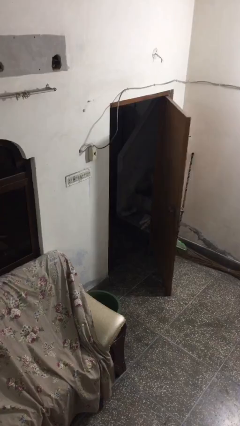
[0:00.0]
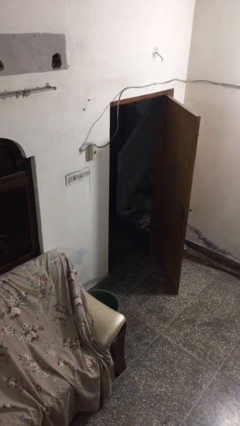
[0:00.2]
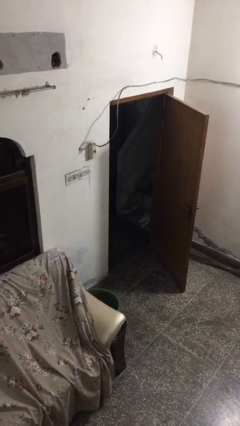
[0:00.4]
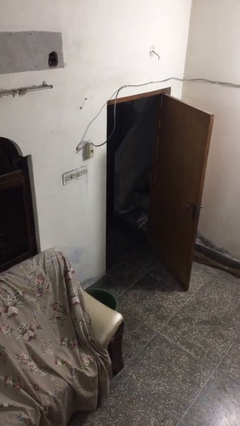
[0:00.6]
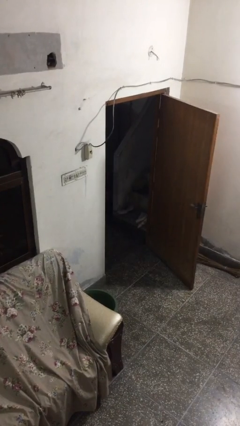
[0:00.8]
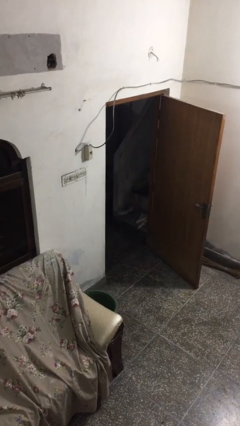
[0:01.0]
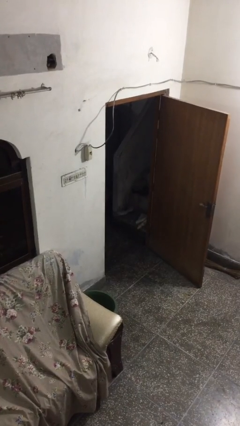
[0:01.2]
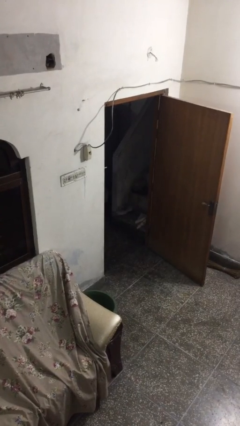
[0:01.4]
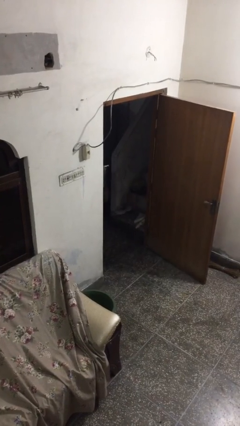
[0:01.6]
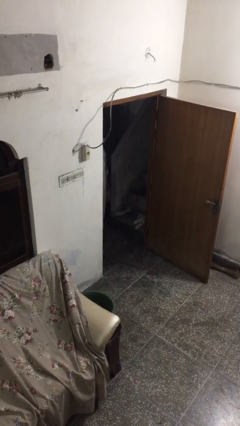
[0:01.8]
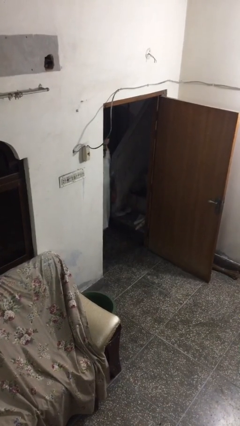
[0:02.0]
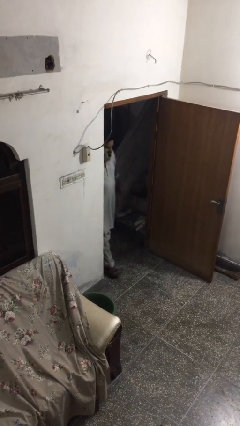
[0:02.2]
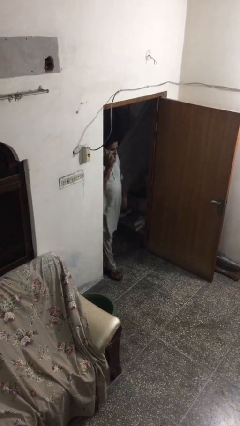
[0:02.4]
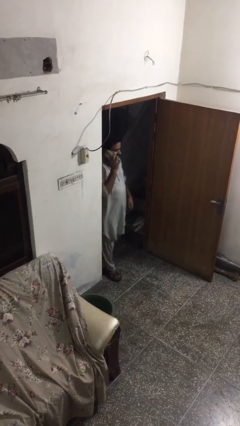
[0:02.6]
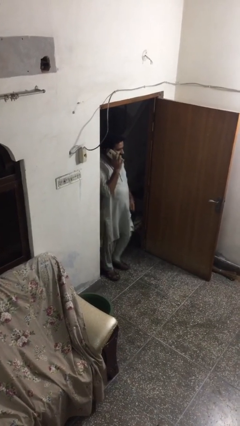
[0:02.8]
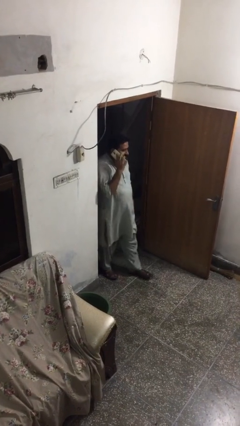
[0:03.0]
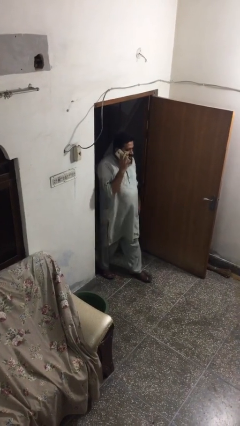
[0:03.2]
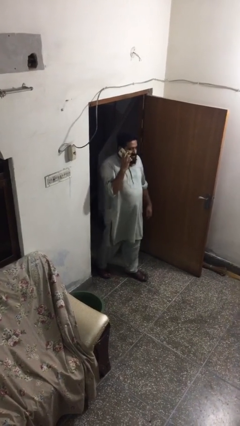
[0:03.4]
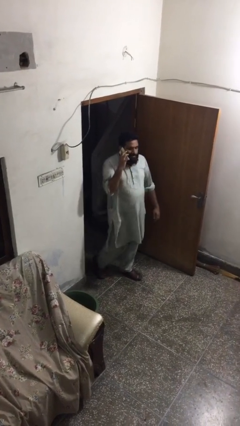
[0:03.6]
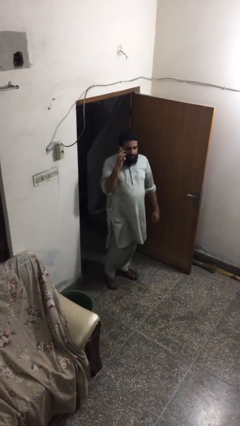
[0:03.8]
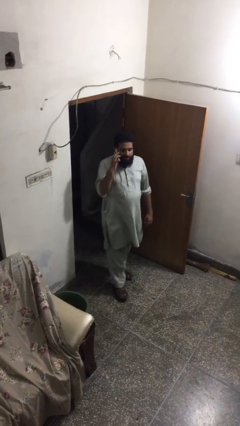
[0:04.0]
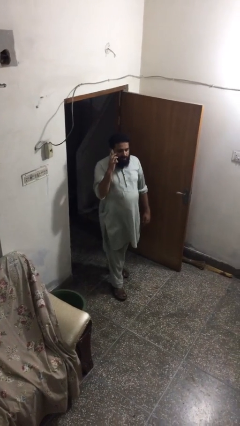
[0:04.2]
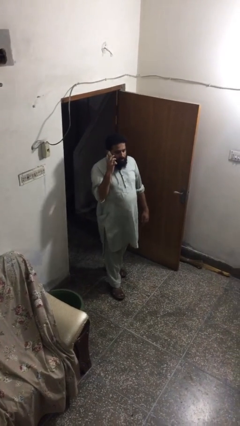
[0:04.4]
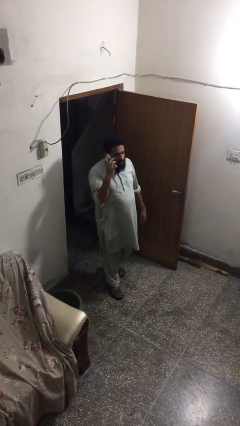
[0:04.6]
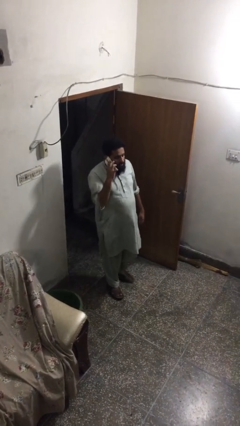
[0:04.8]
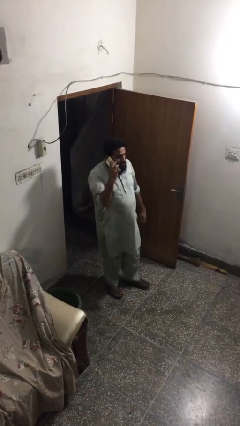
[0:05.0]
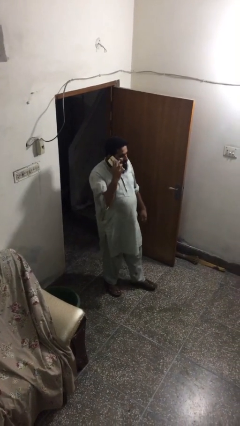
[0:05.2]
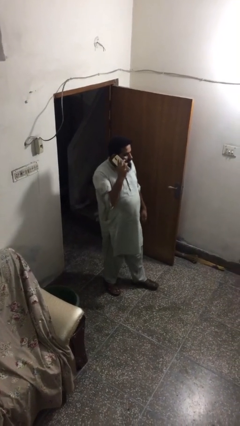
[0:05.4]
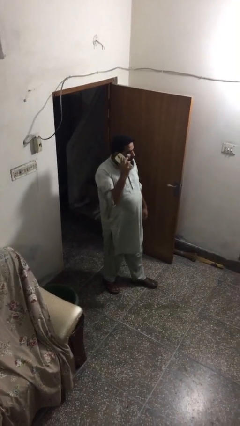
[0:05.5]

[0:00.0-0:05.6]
person enters scene through structure

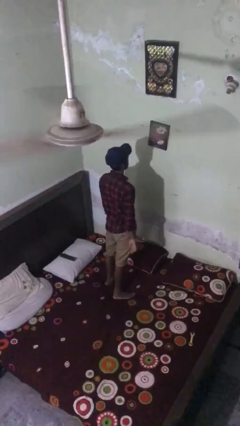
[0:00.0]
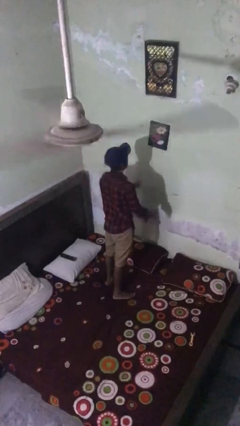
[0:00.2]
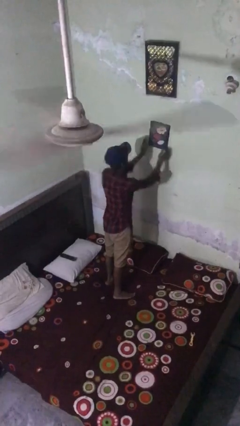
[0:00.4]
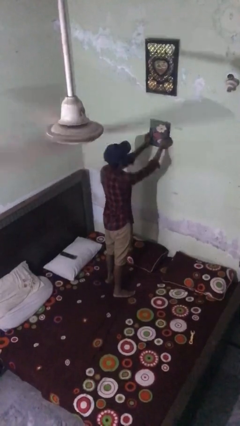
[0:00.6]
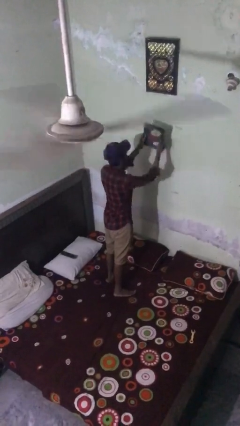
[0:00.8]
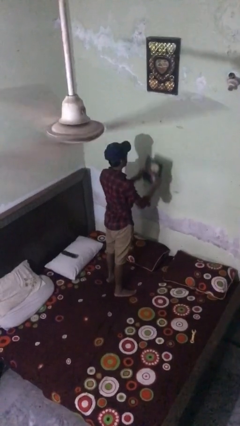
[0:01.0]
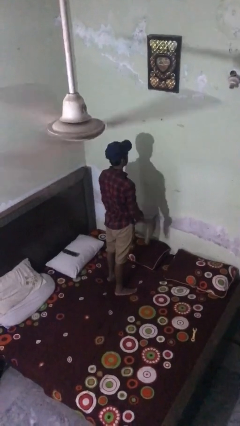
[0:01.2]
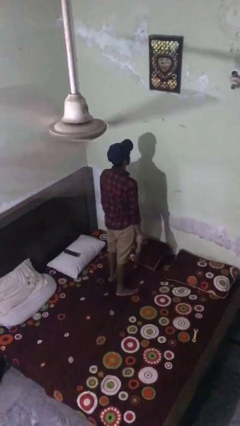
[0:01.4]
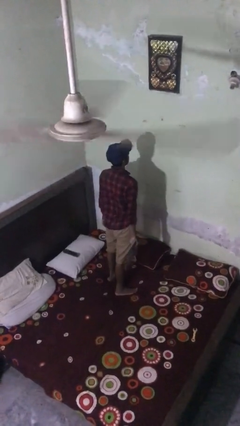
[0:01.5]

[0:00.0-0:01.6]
person takes down picture frame

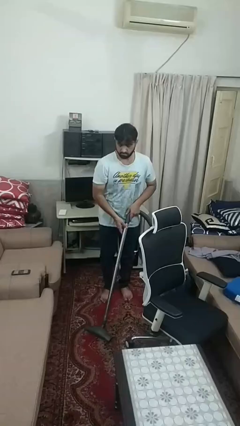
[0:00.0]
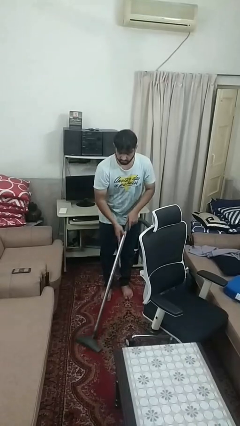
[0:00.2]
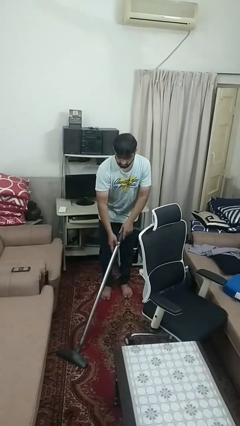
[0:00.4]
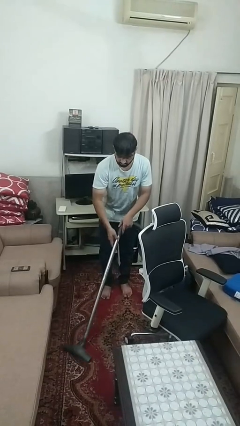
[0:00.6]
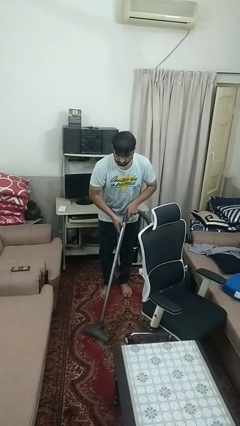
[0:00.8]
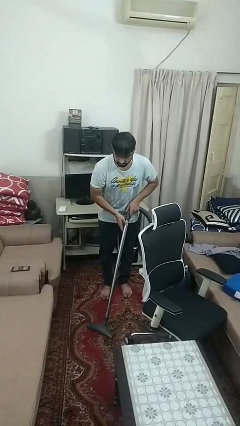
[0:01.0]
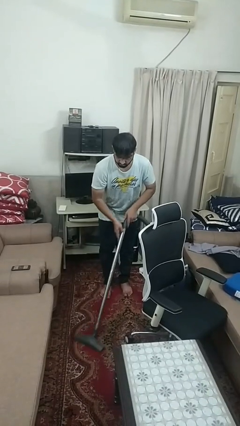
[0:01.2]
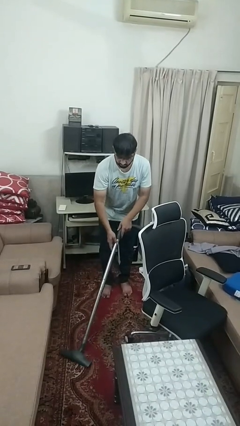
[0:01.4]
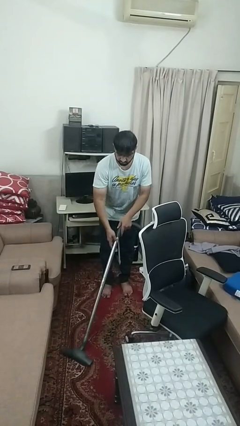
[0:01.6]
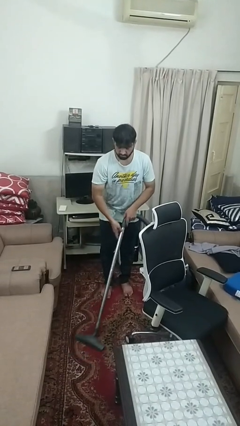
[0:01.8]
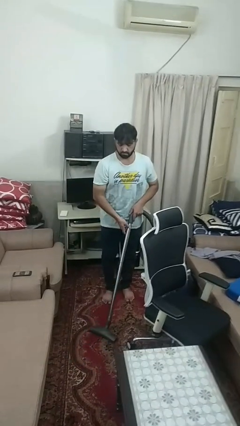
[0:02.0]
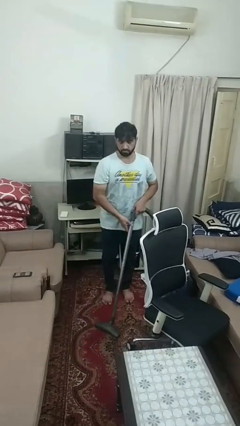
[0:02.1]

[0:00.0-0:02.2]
person vacuums carpet

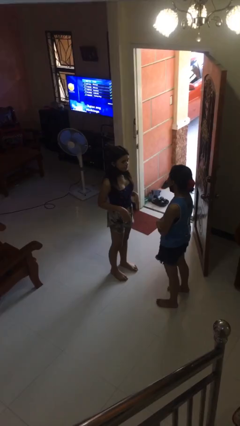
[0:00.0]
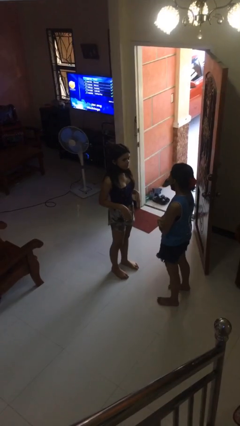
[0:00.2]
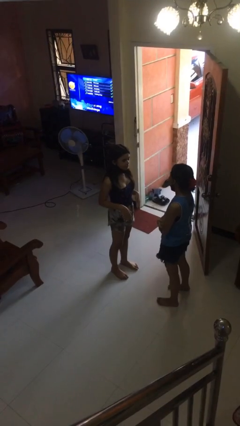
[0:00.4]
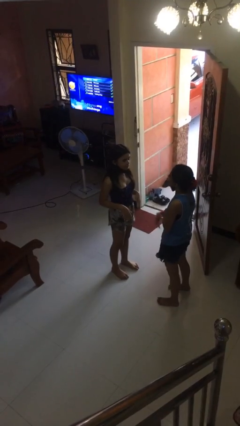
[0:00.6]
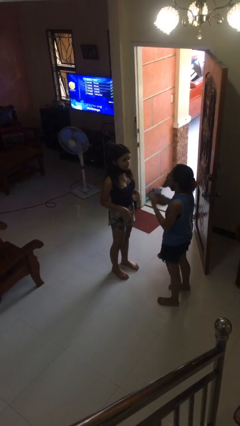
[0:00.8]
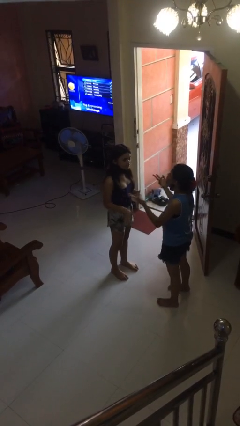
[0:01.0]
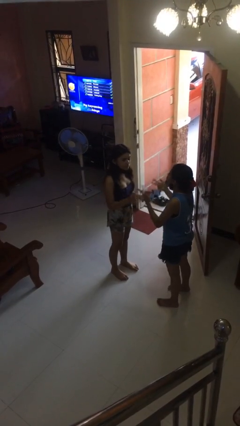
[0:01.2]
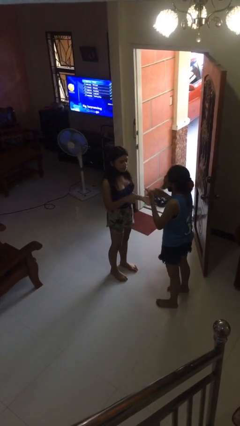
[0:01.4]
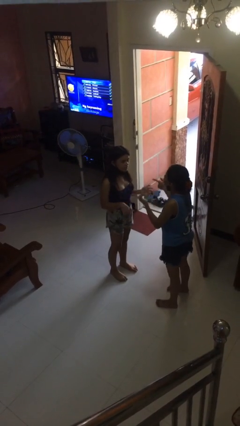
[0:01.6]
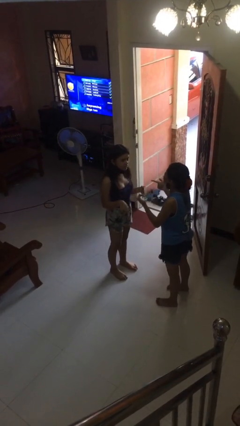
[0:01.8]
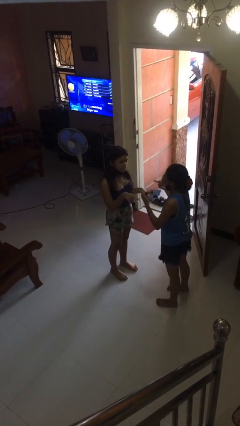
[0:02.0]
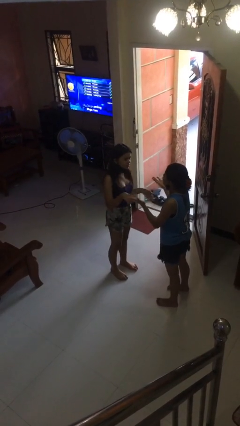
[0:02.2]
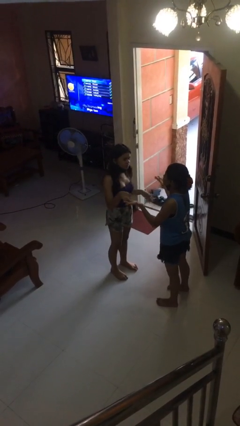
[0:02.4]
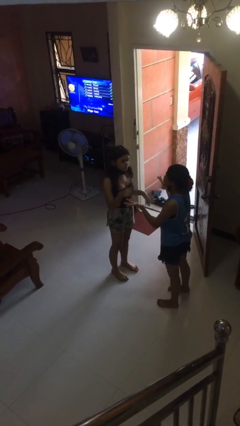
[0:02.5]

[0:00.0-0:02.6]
person talks to person

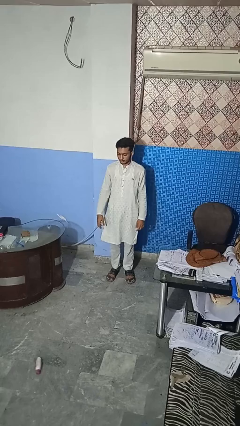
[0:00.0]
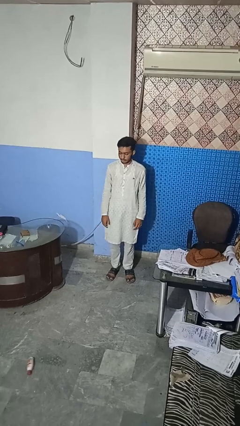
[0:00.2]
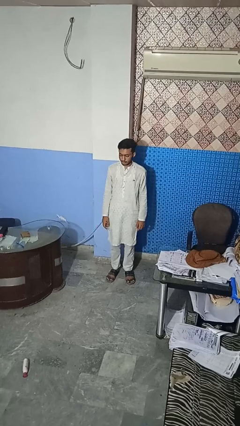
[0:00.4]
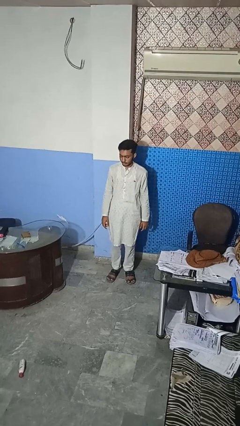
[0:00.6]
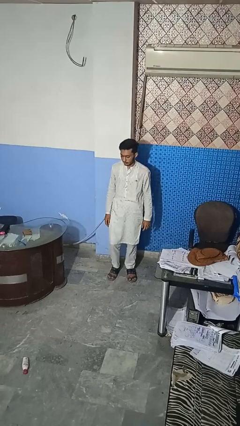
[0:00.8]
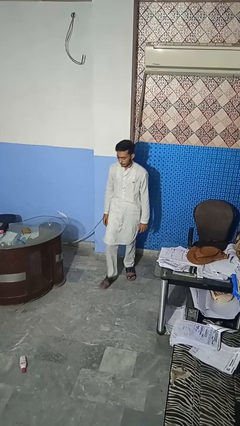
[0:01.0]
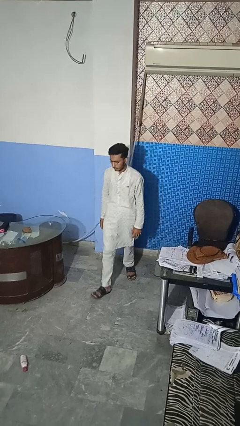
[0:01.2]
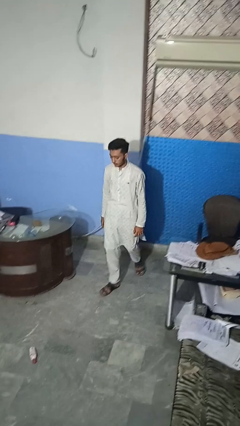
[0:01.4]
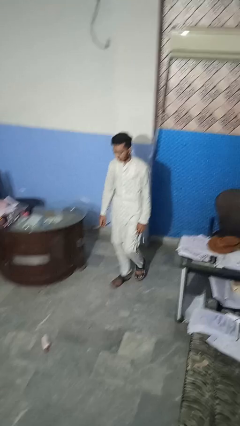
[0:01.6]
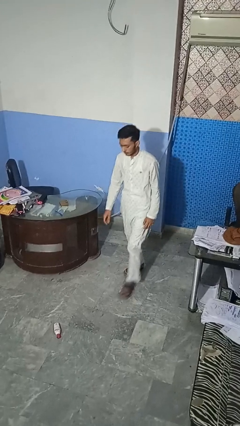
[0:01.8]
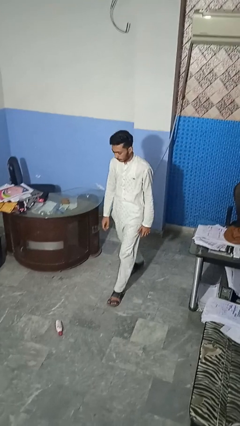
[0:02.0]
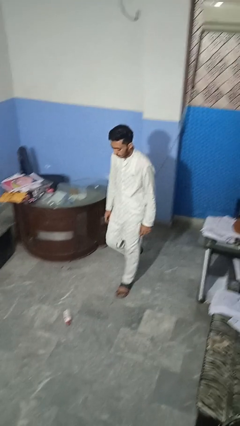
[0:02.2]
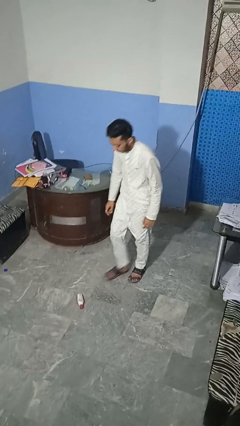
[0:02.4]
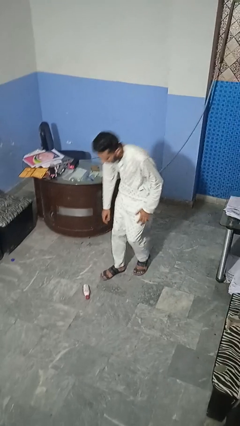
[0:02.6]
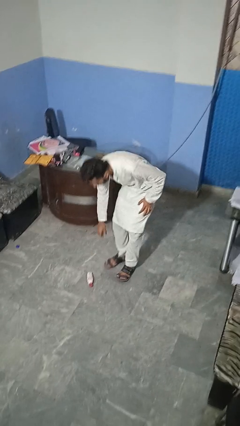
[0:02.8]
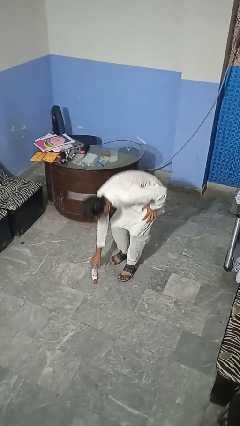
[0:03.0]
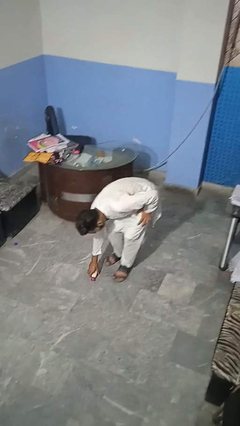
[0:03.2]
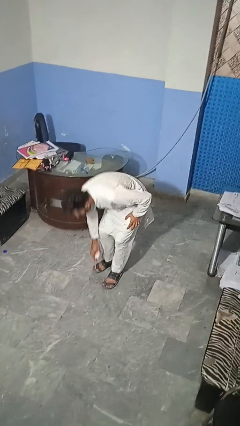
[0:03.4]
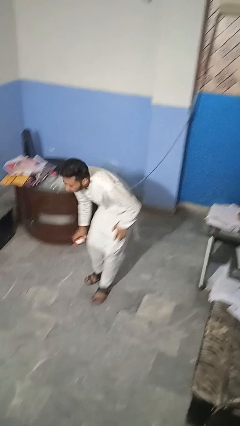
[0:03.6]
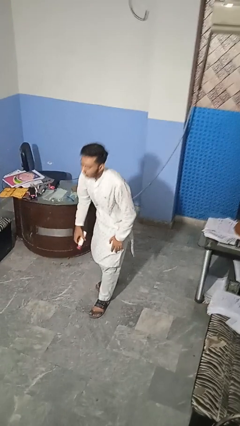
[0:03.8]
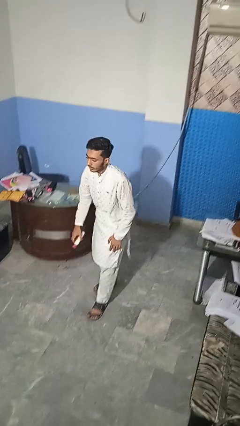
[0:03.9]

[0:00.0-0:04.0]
person picks up object from floor

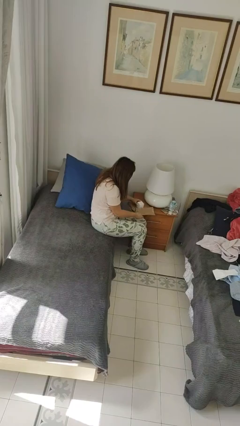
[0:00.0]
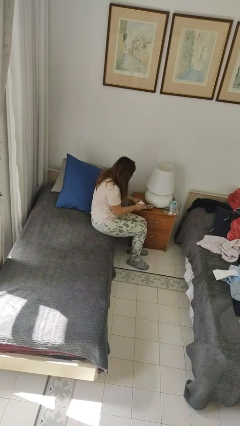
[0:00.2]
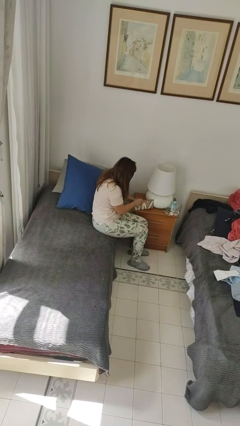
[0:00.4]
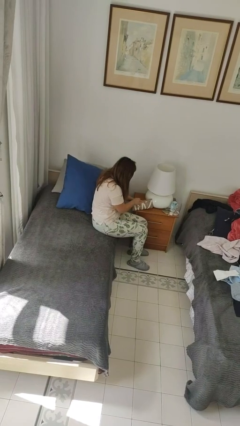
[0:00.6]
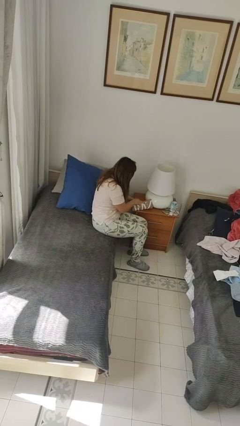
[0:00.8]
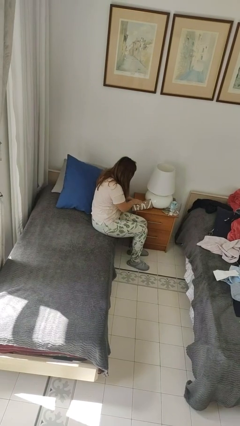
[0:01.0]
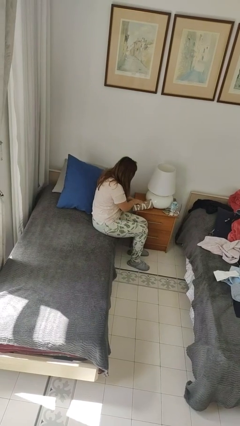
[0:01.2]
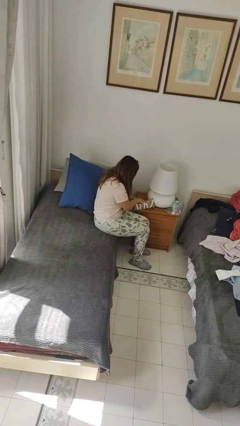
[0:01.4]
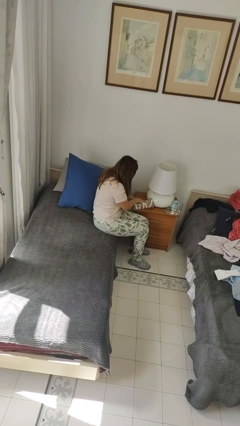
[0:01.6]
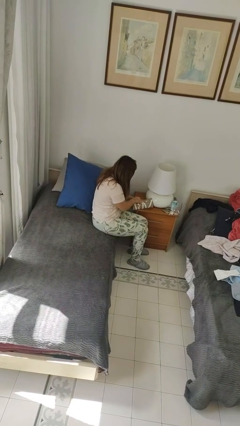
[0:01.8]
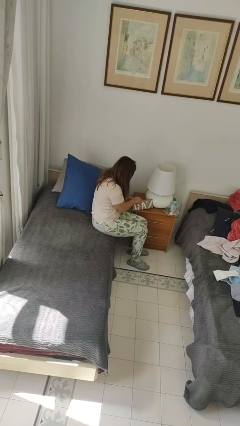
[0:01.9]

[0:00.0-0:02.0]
person wraps box
